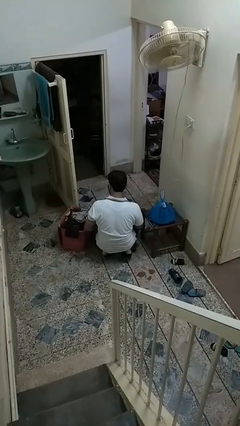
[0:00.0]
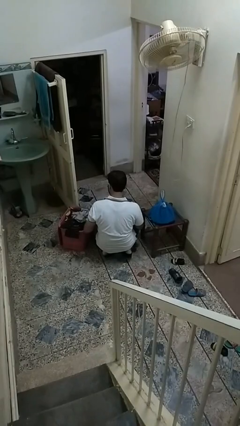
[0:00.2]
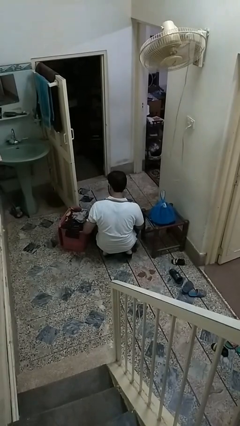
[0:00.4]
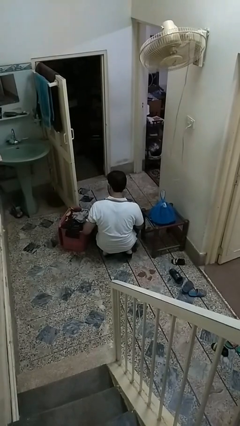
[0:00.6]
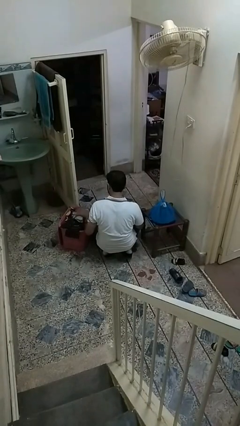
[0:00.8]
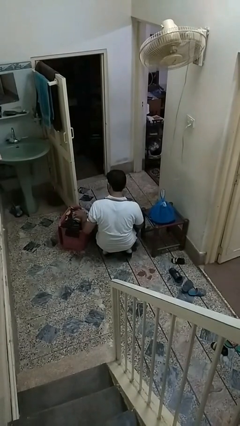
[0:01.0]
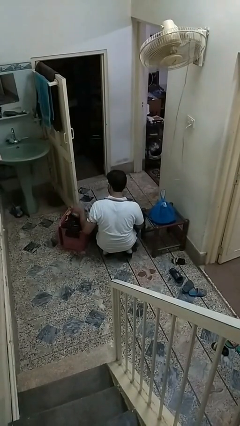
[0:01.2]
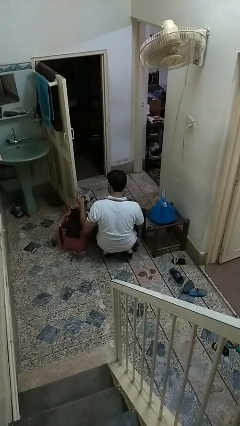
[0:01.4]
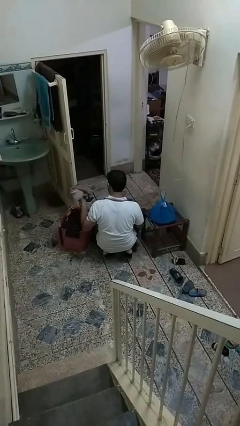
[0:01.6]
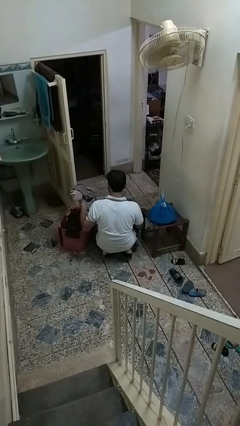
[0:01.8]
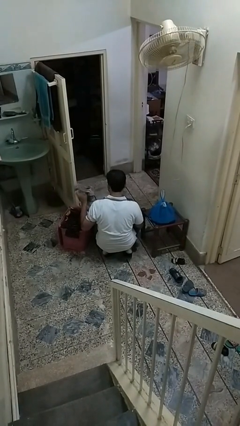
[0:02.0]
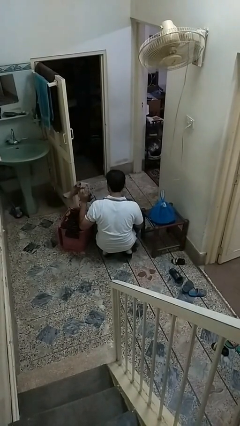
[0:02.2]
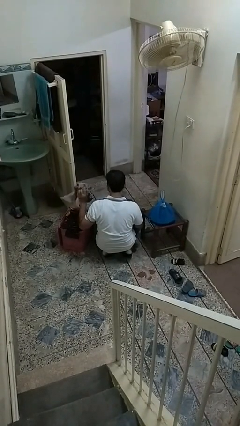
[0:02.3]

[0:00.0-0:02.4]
person takes object from basket

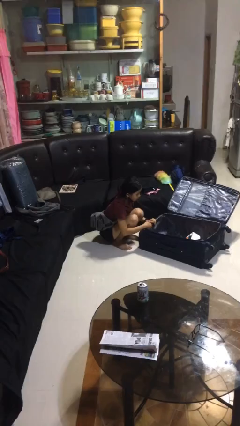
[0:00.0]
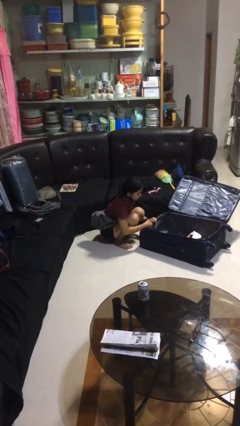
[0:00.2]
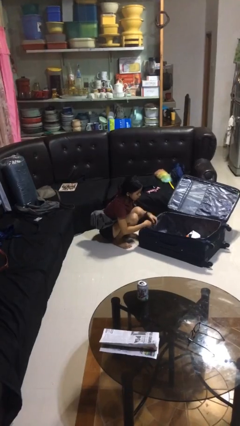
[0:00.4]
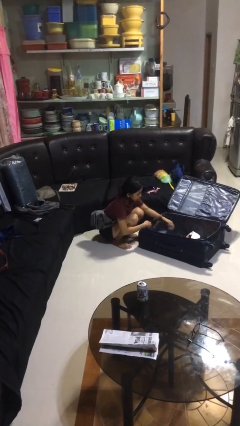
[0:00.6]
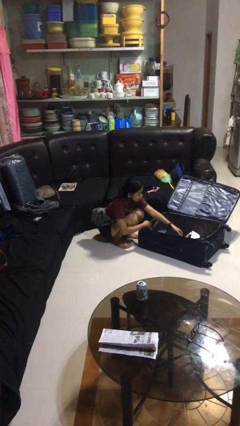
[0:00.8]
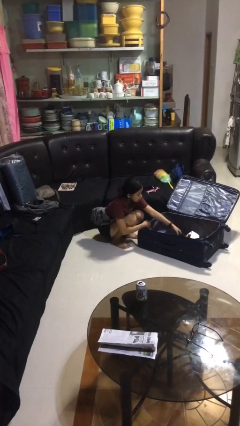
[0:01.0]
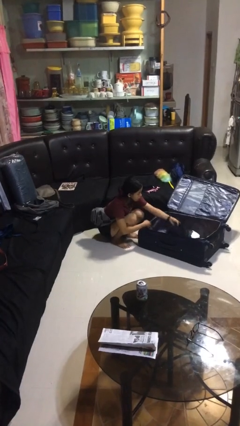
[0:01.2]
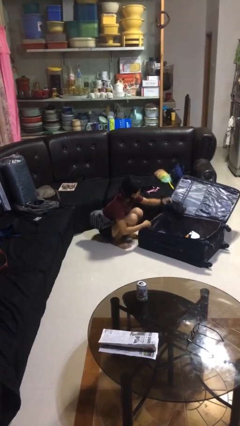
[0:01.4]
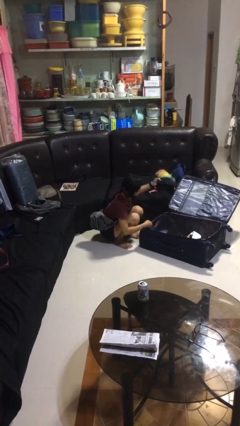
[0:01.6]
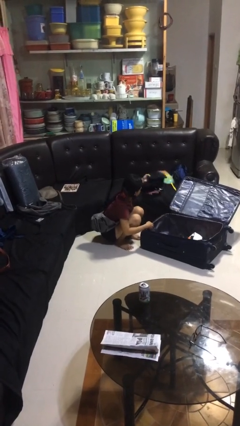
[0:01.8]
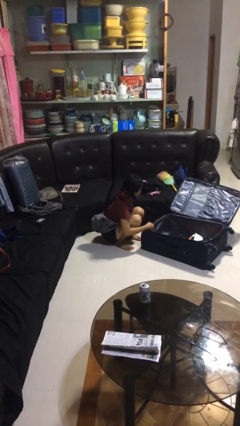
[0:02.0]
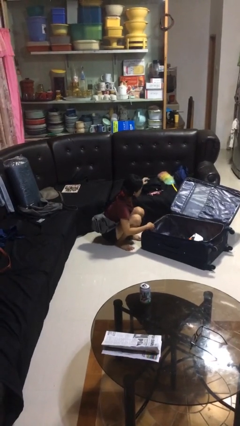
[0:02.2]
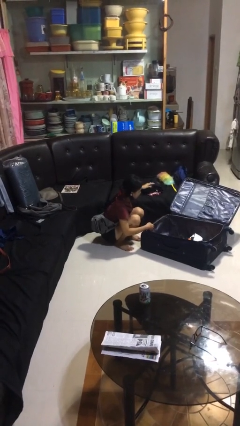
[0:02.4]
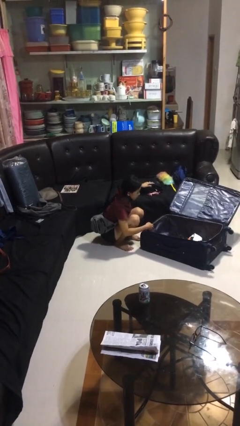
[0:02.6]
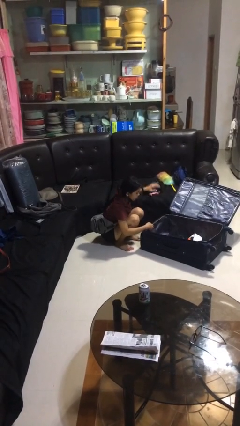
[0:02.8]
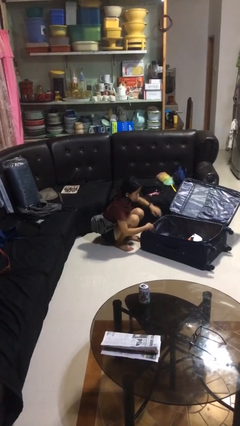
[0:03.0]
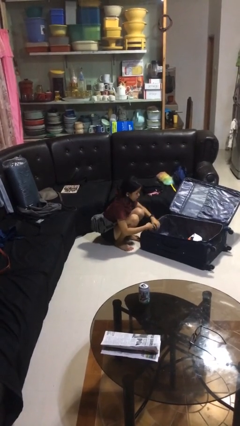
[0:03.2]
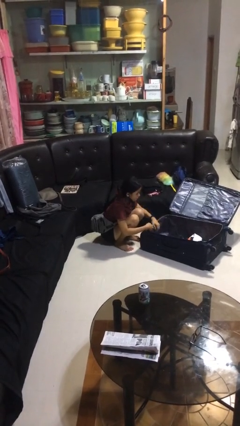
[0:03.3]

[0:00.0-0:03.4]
person loads clothes into suitcase

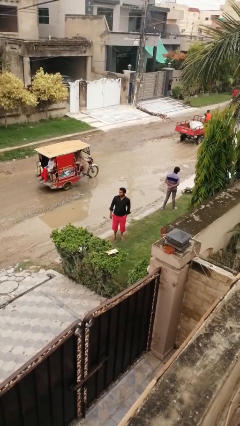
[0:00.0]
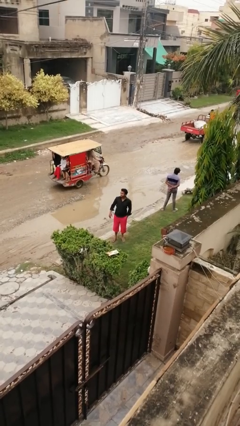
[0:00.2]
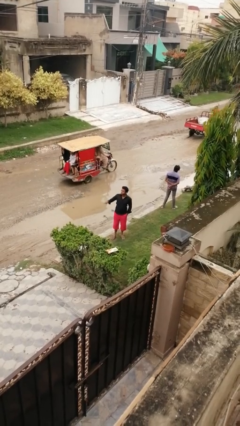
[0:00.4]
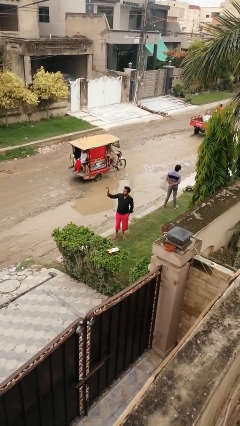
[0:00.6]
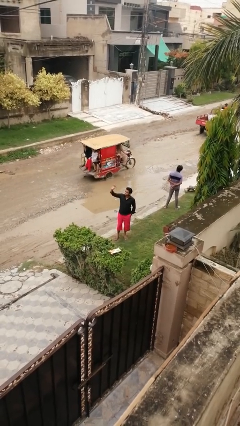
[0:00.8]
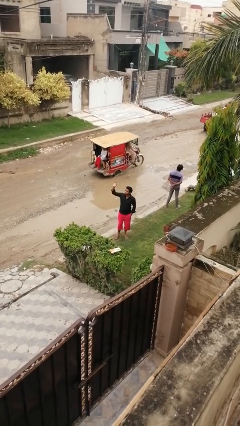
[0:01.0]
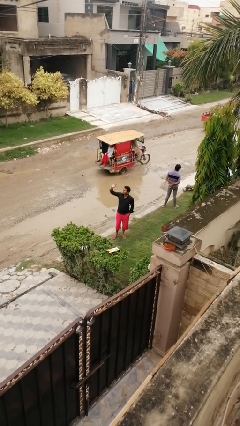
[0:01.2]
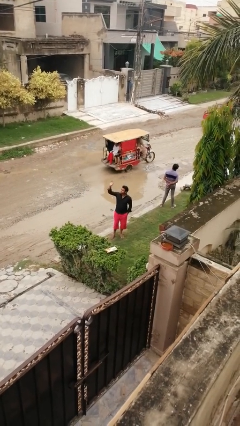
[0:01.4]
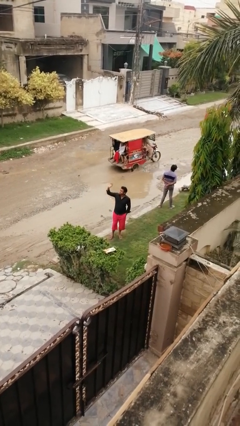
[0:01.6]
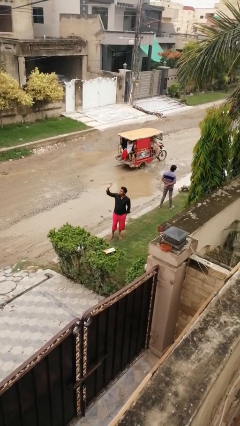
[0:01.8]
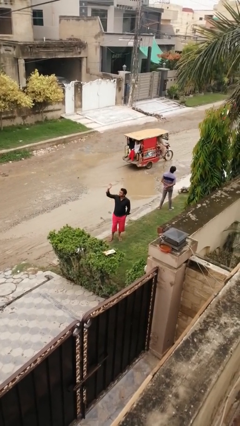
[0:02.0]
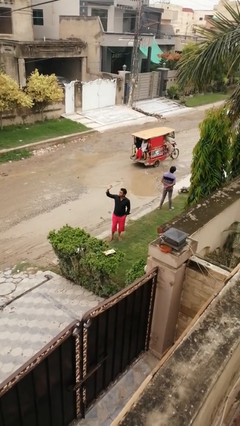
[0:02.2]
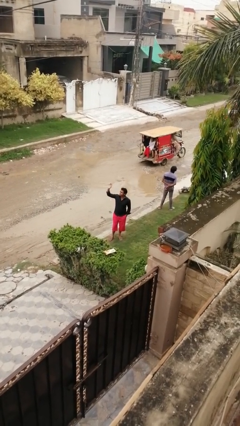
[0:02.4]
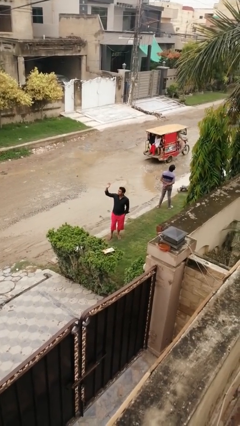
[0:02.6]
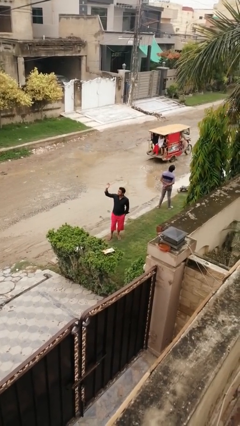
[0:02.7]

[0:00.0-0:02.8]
person waves at person

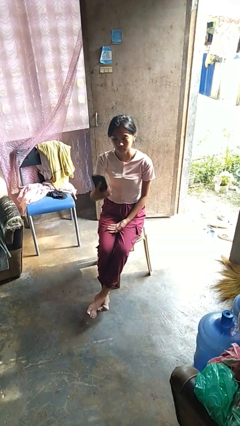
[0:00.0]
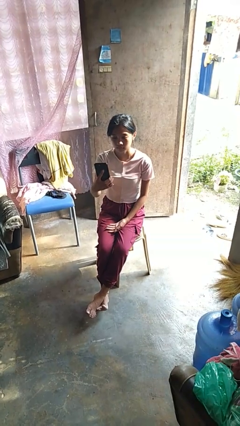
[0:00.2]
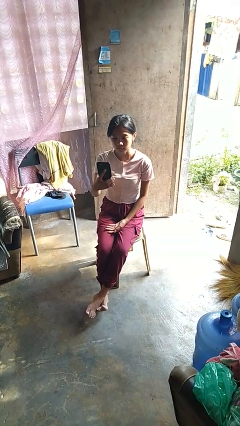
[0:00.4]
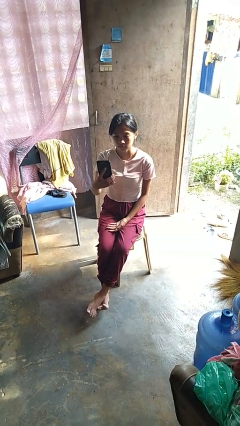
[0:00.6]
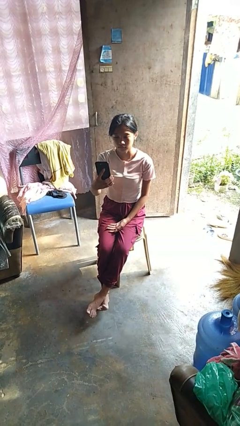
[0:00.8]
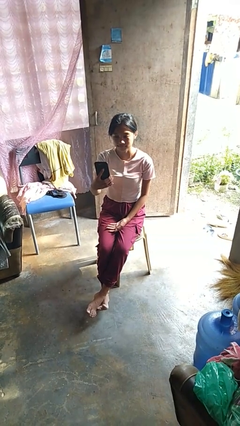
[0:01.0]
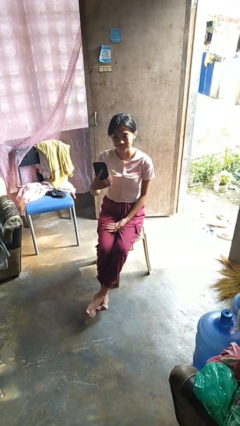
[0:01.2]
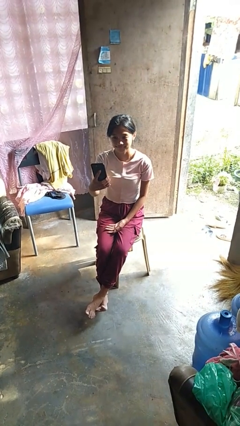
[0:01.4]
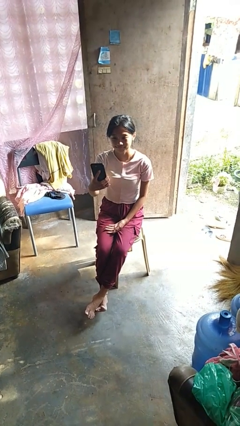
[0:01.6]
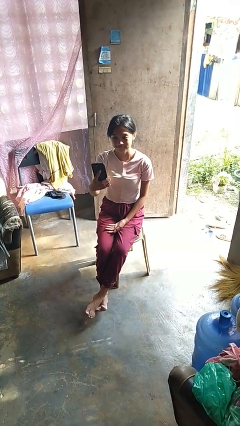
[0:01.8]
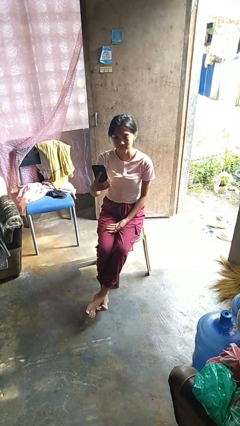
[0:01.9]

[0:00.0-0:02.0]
person takes selfie

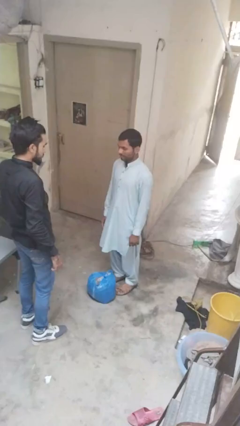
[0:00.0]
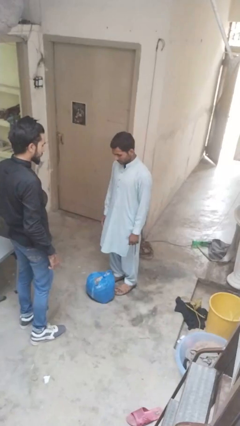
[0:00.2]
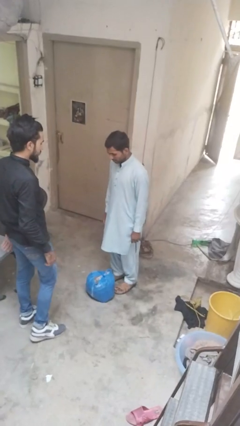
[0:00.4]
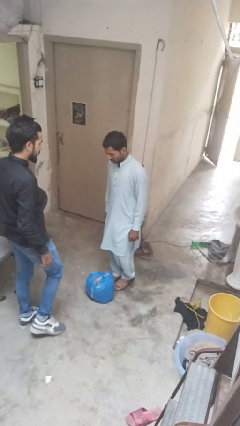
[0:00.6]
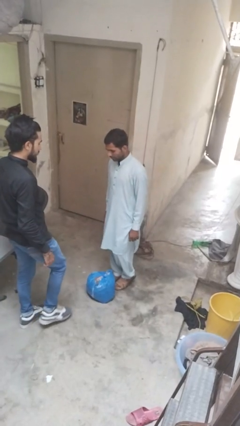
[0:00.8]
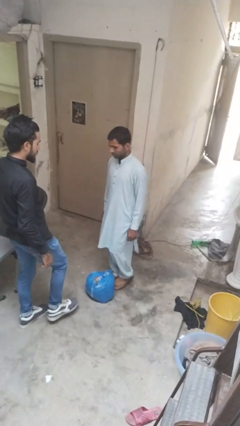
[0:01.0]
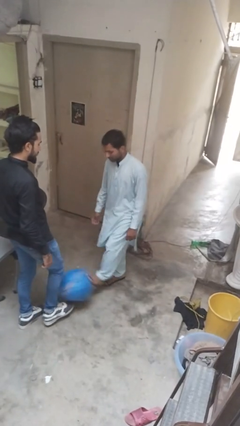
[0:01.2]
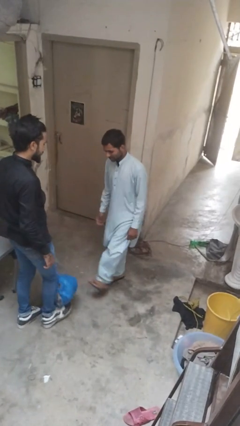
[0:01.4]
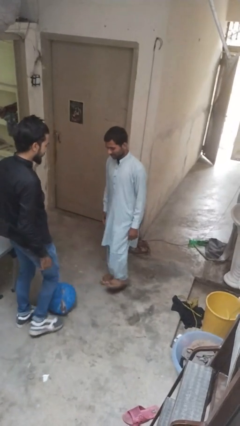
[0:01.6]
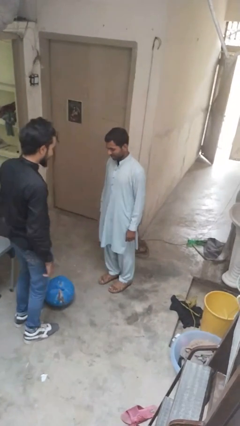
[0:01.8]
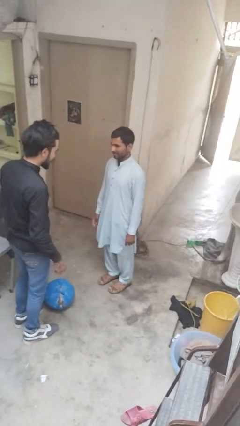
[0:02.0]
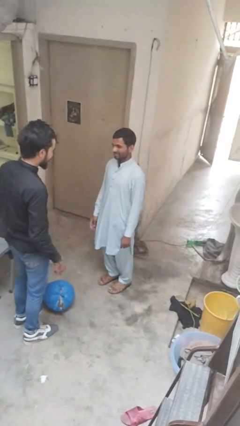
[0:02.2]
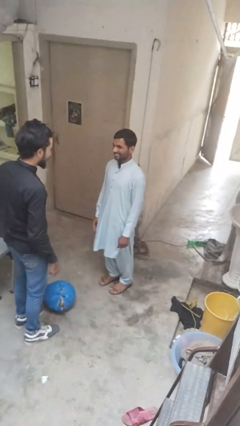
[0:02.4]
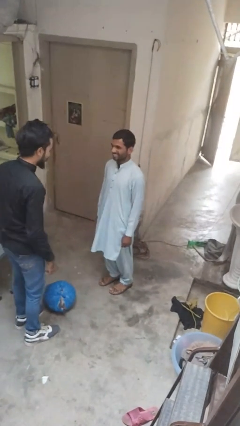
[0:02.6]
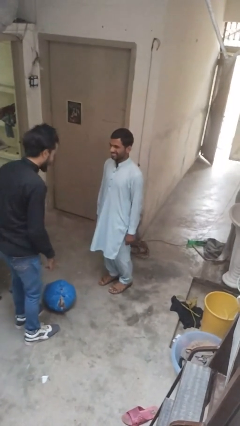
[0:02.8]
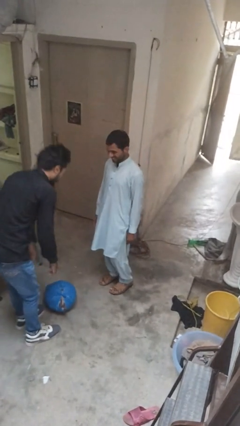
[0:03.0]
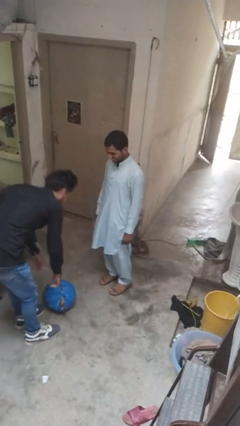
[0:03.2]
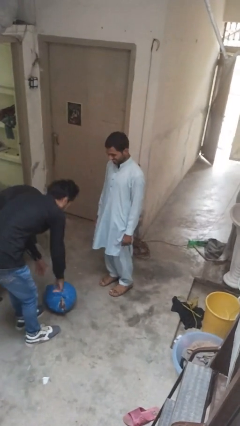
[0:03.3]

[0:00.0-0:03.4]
person kicks object to person

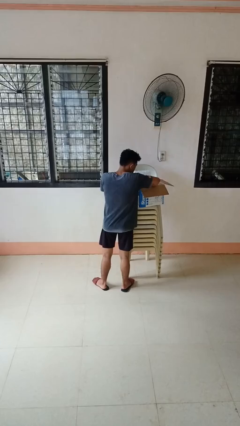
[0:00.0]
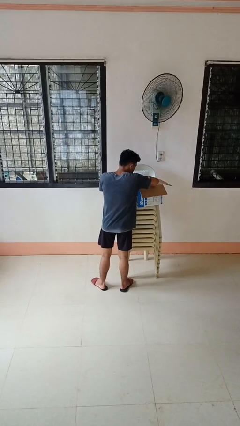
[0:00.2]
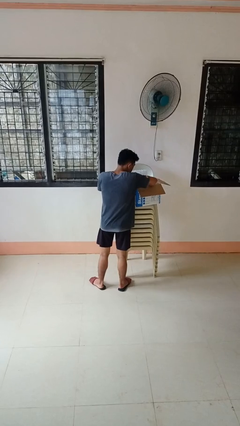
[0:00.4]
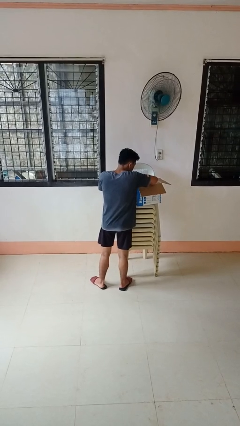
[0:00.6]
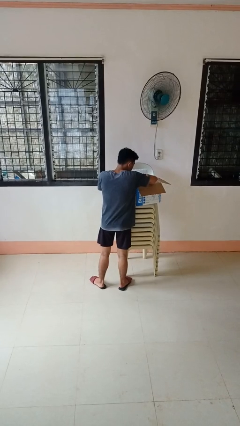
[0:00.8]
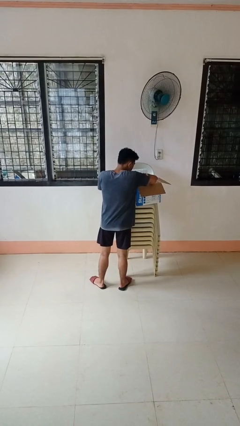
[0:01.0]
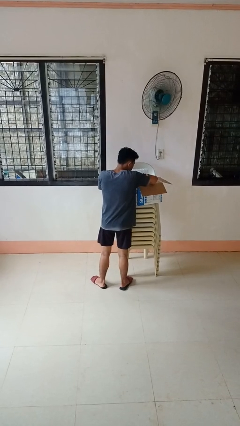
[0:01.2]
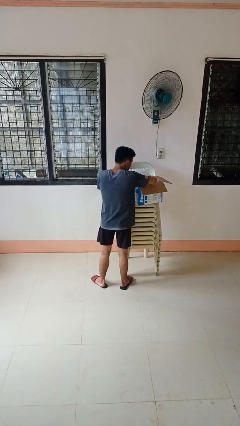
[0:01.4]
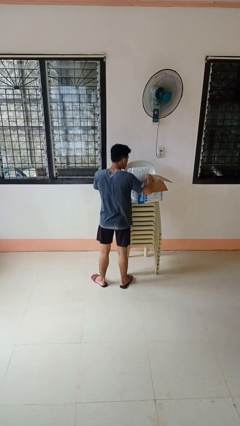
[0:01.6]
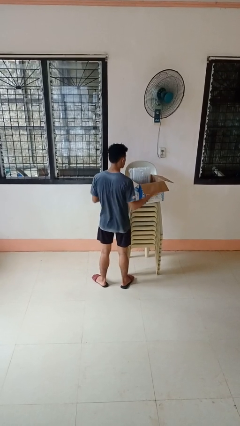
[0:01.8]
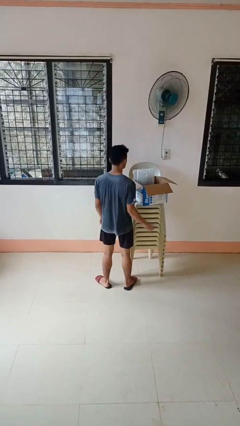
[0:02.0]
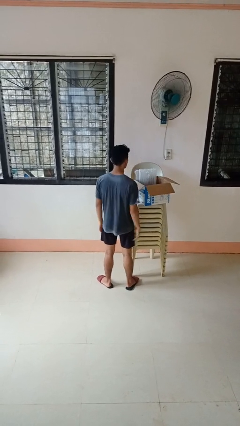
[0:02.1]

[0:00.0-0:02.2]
person searches in box

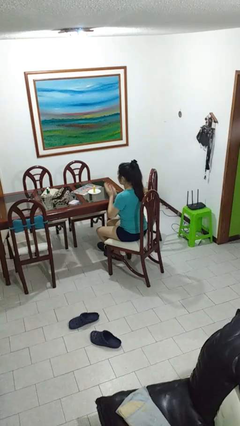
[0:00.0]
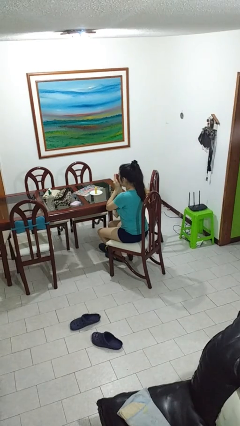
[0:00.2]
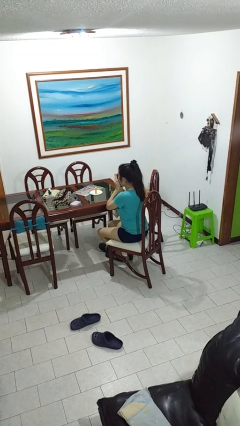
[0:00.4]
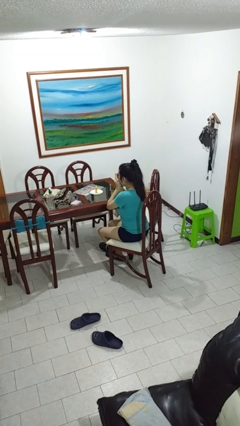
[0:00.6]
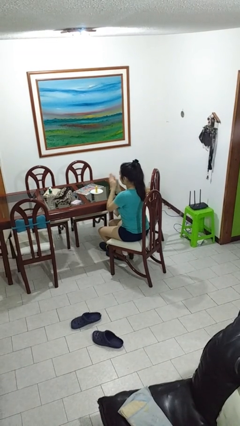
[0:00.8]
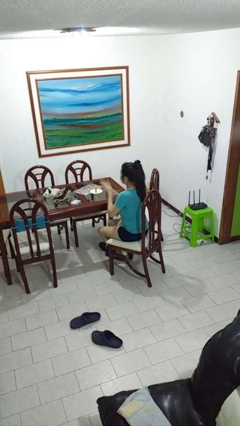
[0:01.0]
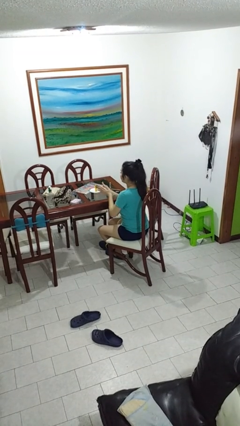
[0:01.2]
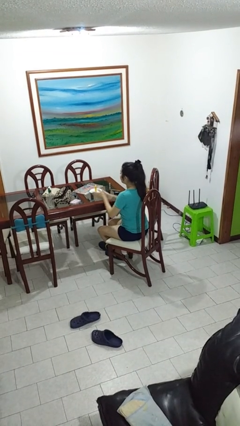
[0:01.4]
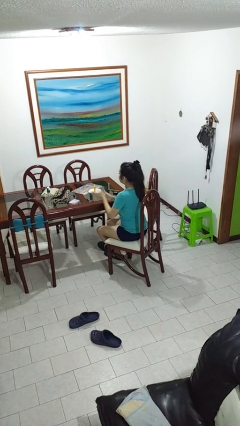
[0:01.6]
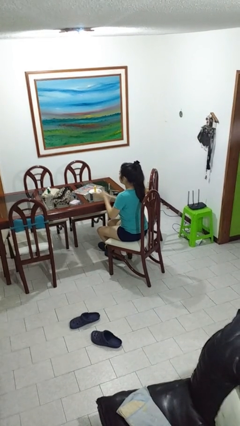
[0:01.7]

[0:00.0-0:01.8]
person blows into hands
